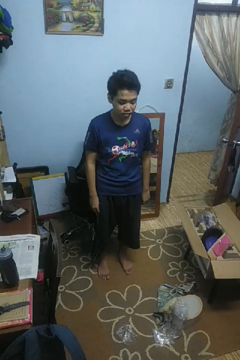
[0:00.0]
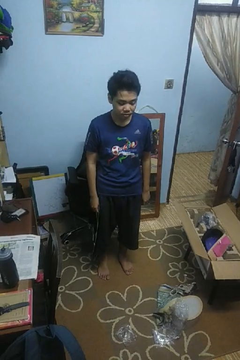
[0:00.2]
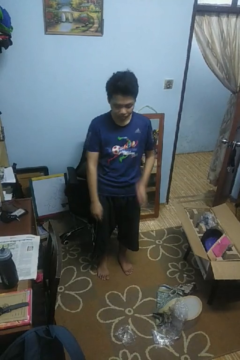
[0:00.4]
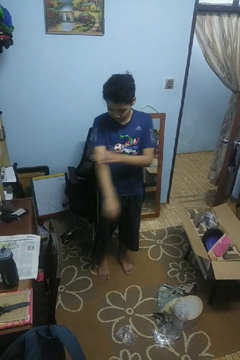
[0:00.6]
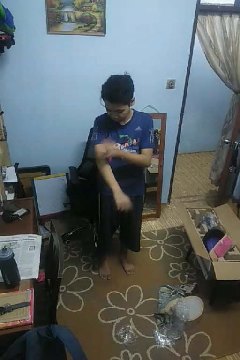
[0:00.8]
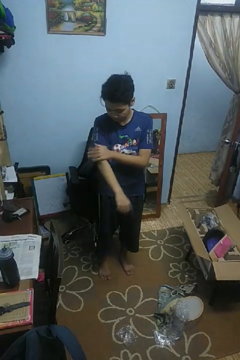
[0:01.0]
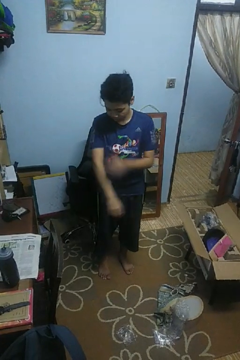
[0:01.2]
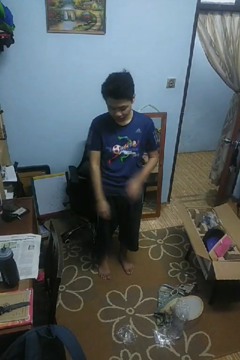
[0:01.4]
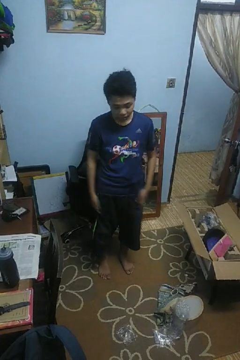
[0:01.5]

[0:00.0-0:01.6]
person swats bug

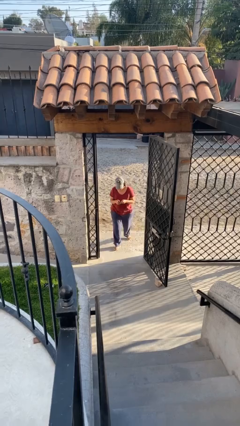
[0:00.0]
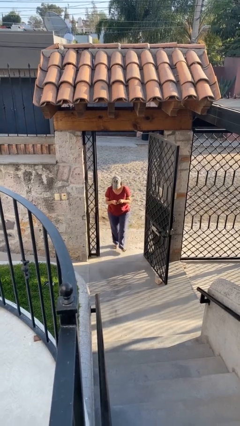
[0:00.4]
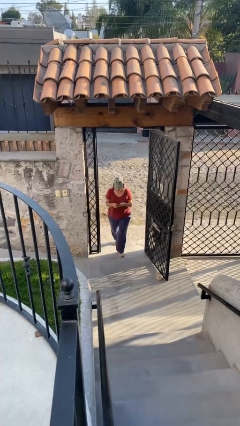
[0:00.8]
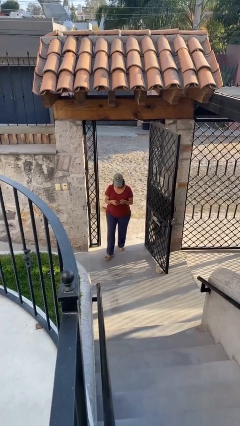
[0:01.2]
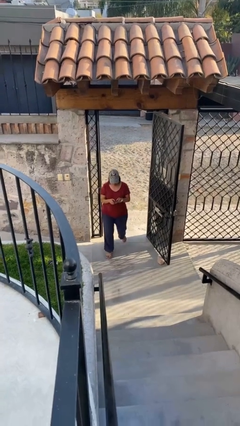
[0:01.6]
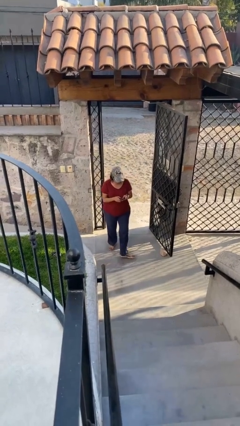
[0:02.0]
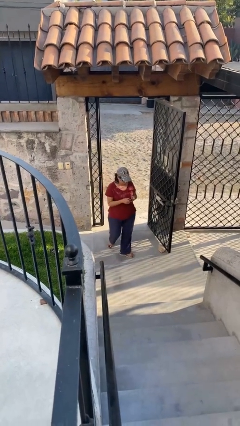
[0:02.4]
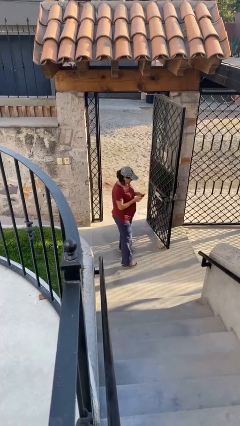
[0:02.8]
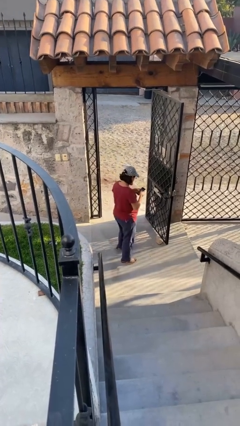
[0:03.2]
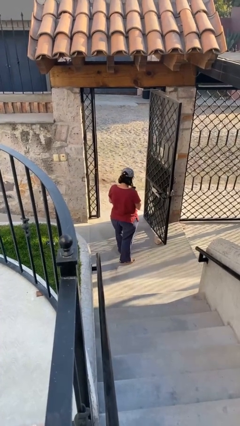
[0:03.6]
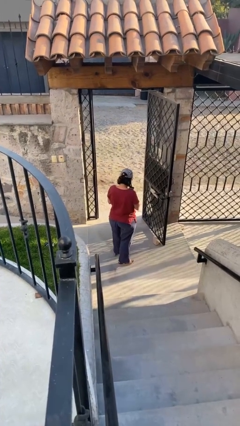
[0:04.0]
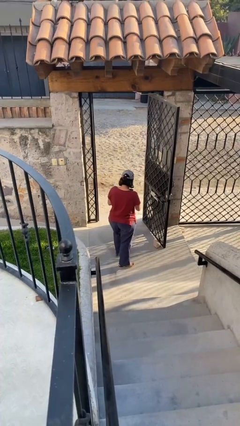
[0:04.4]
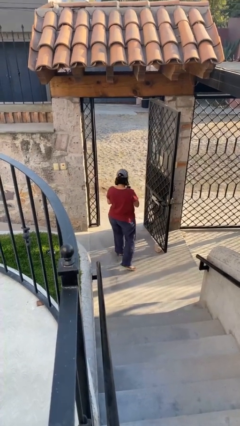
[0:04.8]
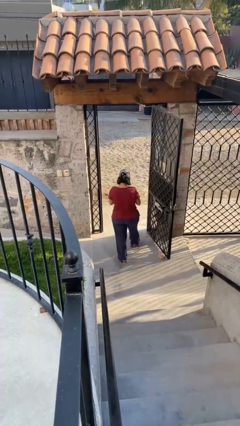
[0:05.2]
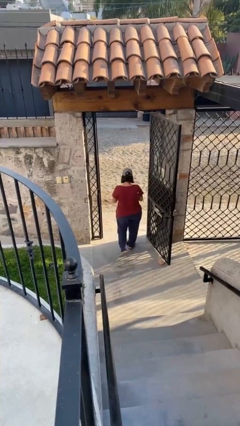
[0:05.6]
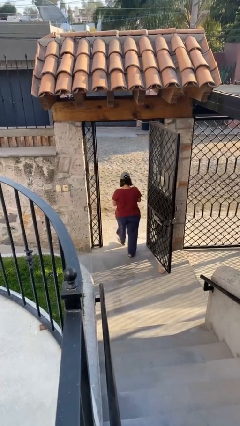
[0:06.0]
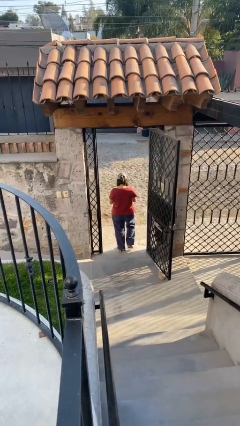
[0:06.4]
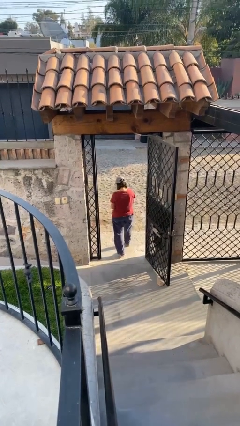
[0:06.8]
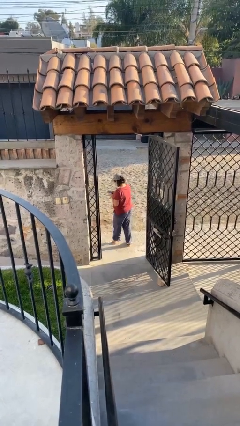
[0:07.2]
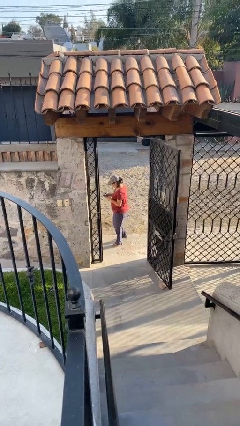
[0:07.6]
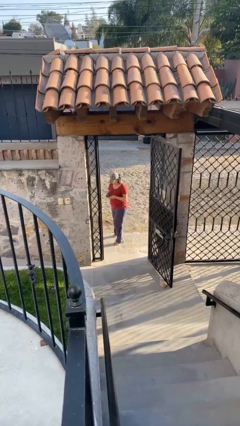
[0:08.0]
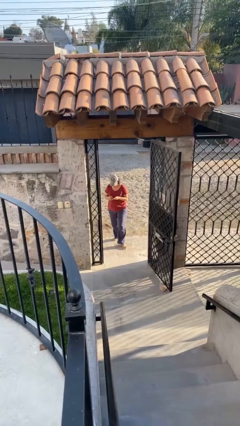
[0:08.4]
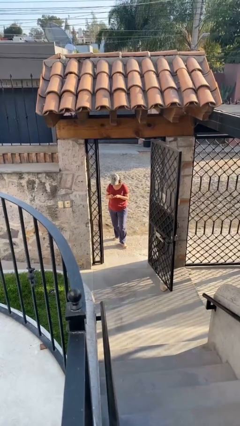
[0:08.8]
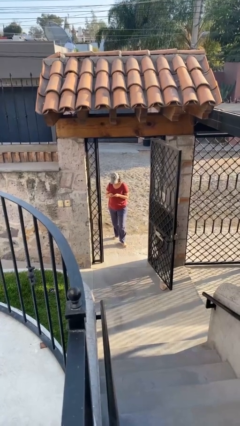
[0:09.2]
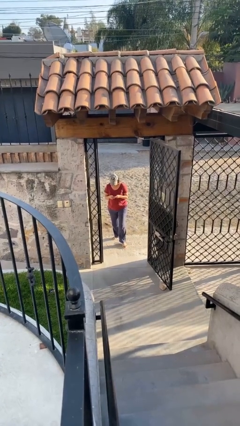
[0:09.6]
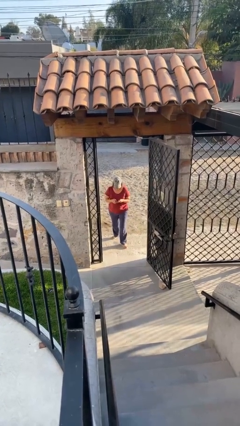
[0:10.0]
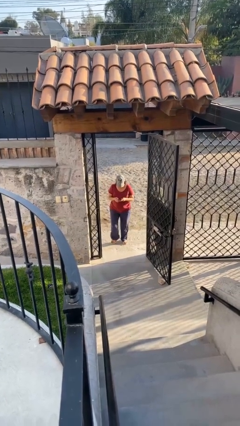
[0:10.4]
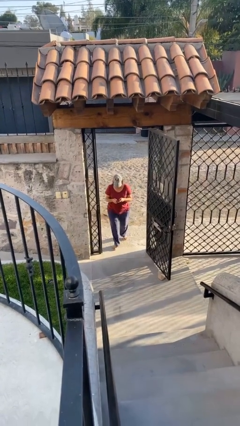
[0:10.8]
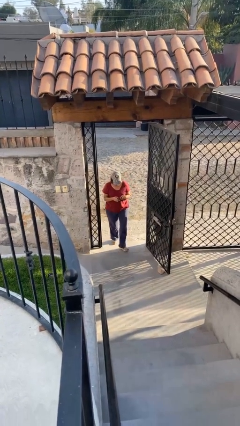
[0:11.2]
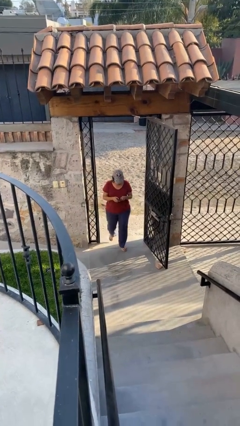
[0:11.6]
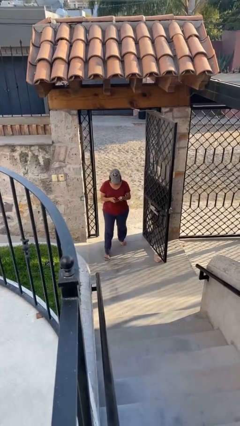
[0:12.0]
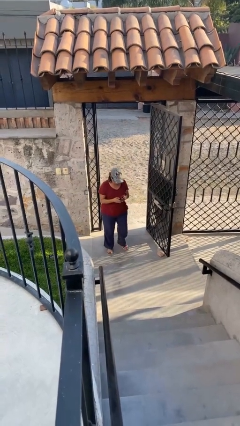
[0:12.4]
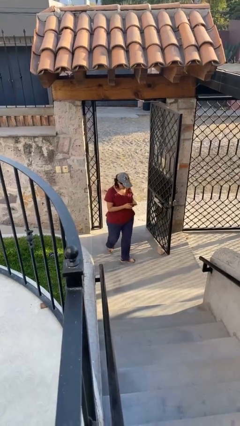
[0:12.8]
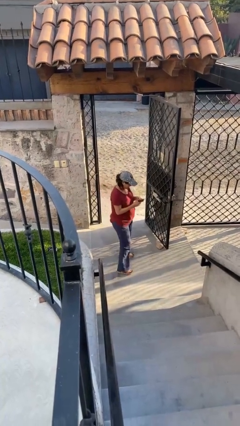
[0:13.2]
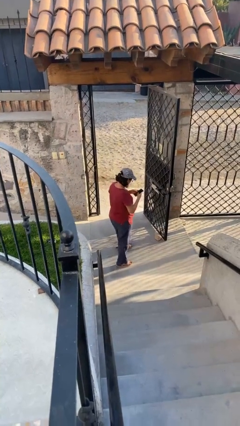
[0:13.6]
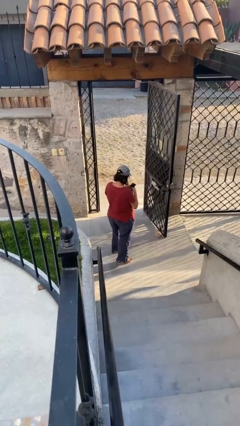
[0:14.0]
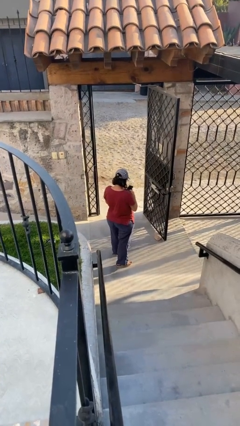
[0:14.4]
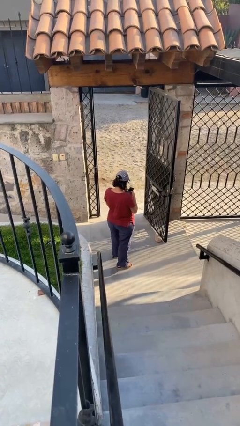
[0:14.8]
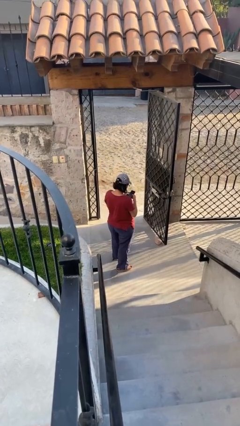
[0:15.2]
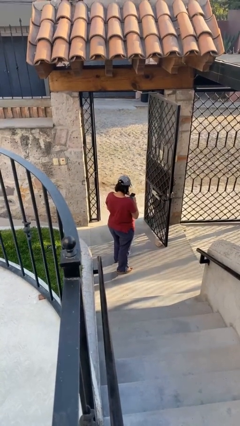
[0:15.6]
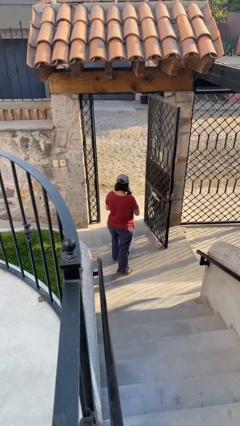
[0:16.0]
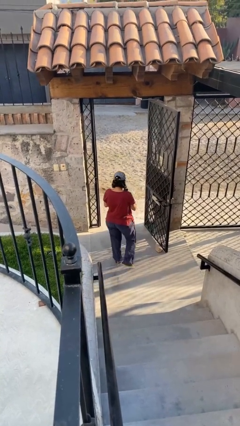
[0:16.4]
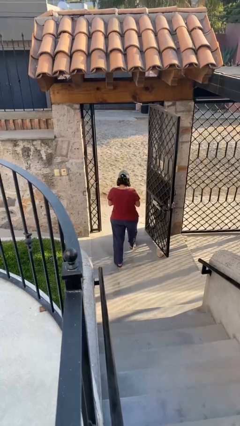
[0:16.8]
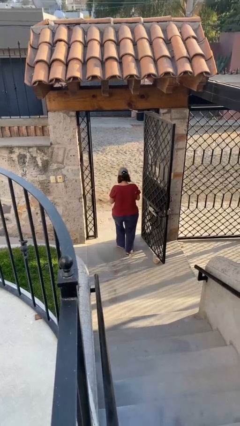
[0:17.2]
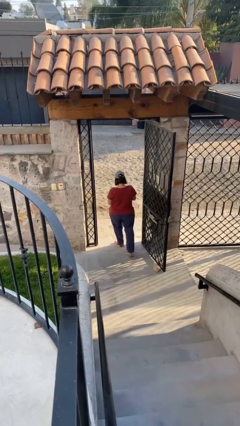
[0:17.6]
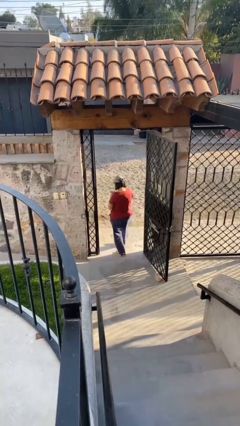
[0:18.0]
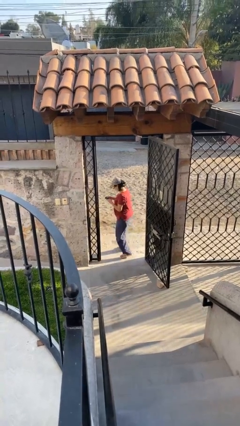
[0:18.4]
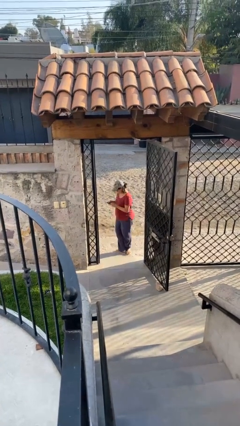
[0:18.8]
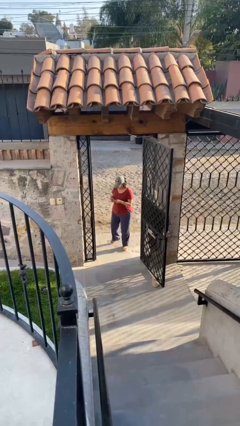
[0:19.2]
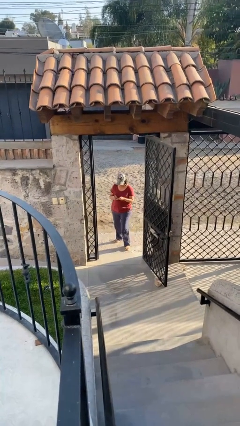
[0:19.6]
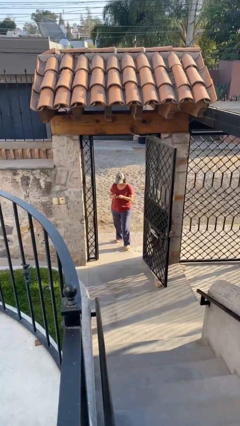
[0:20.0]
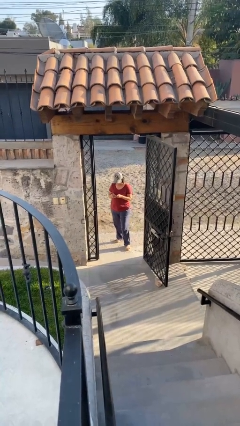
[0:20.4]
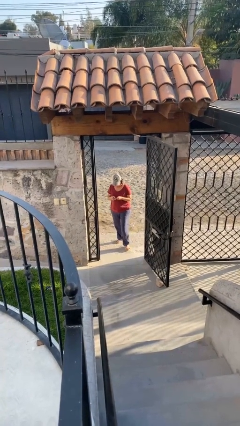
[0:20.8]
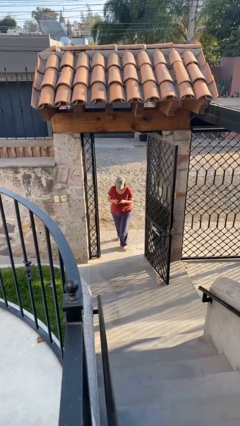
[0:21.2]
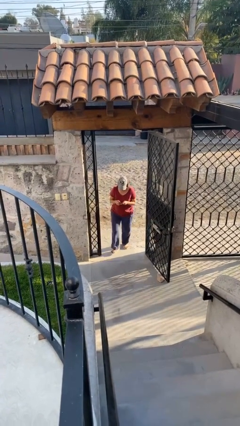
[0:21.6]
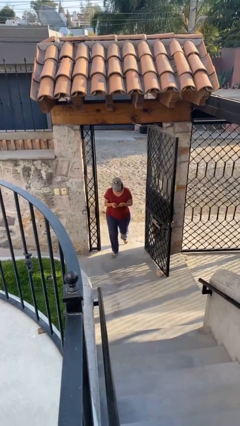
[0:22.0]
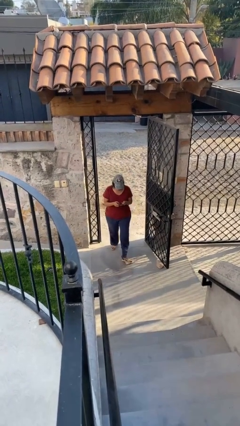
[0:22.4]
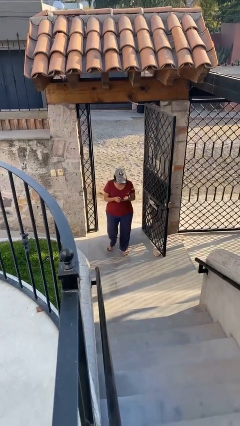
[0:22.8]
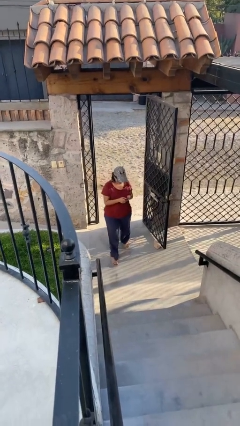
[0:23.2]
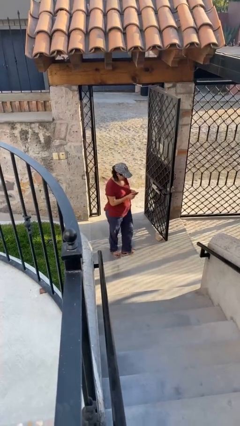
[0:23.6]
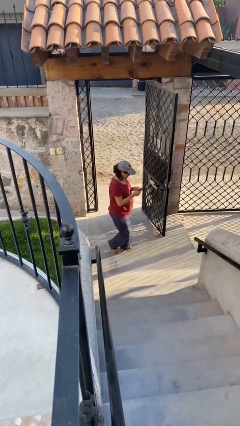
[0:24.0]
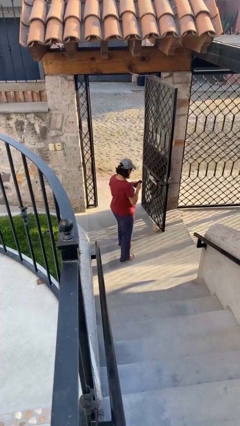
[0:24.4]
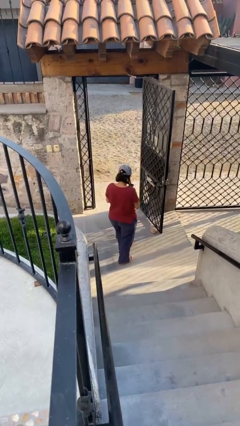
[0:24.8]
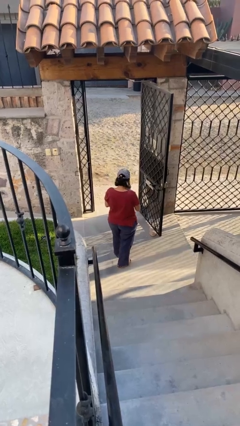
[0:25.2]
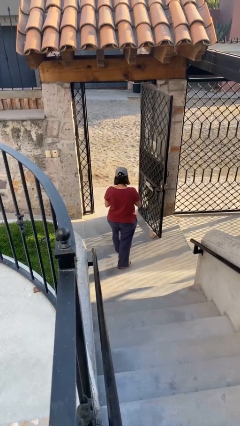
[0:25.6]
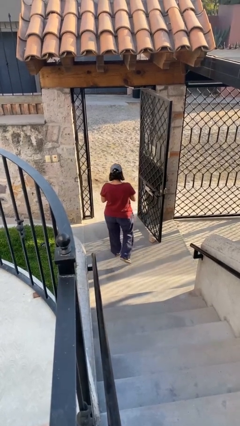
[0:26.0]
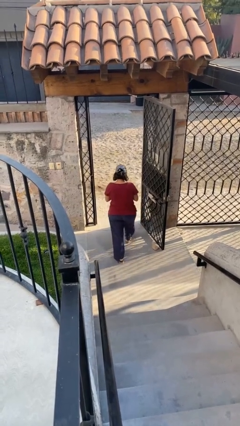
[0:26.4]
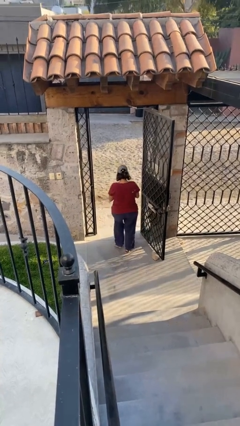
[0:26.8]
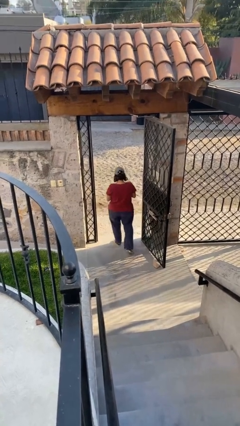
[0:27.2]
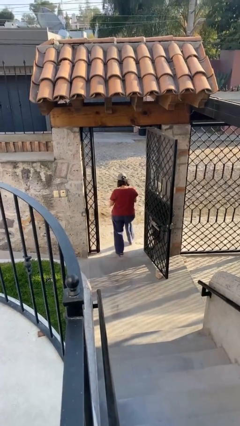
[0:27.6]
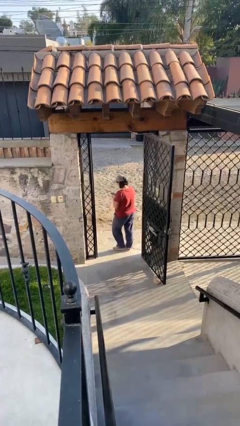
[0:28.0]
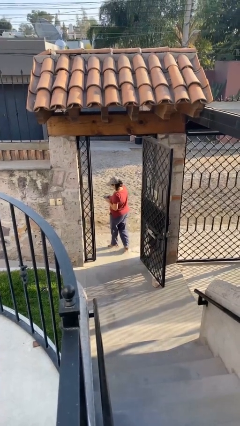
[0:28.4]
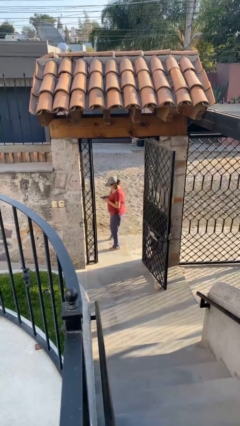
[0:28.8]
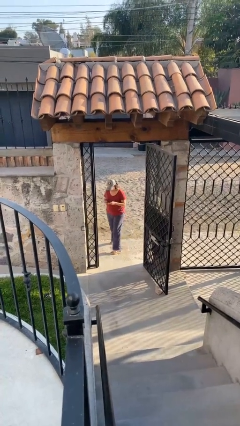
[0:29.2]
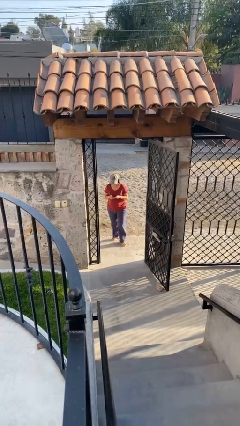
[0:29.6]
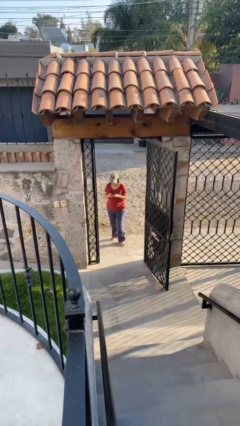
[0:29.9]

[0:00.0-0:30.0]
person texts on phone

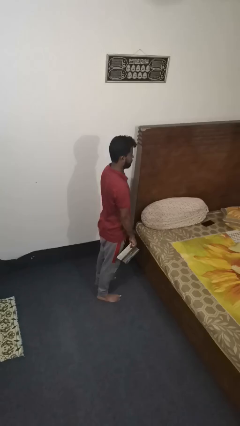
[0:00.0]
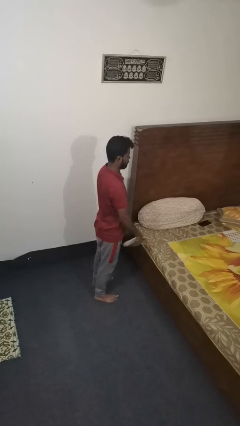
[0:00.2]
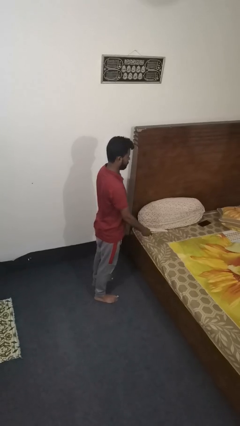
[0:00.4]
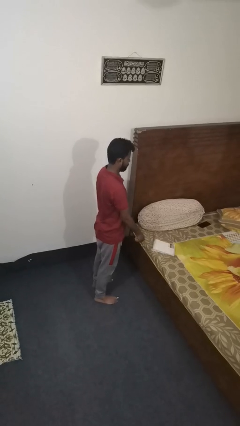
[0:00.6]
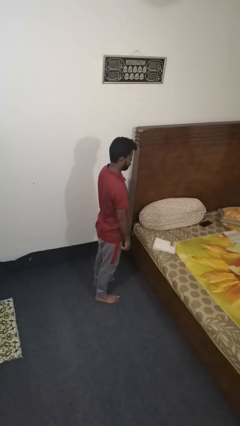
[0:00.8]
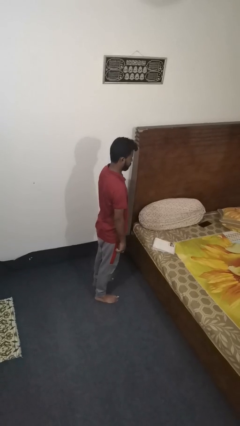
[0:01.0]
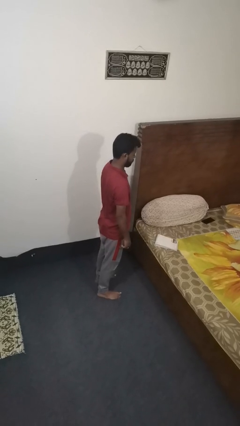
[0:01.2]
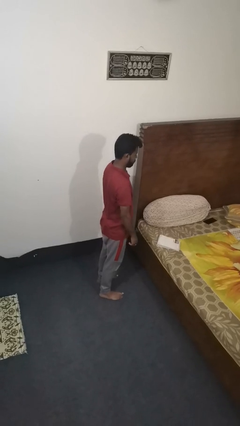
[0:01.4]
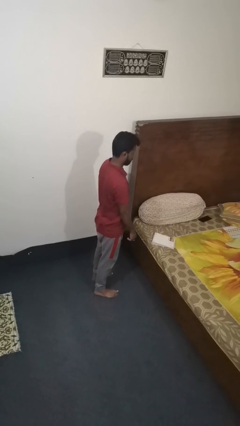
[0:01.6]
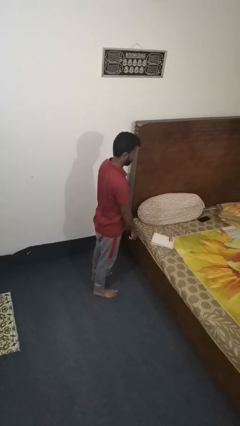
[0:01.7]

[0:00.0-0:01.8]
person throws object on bed
